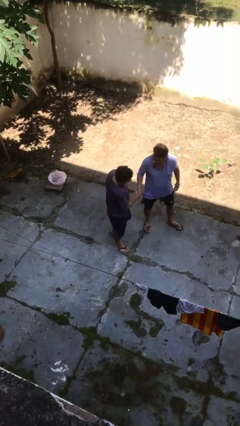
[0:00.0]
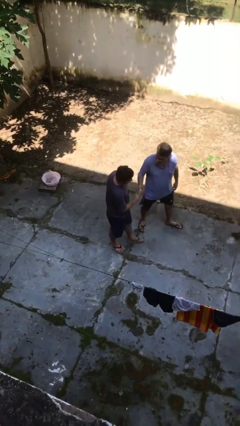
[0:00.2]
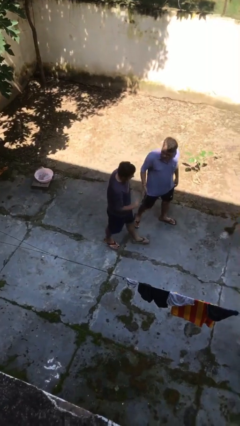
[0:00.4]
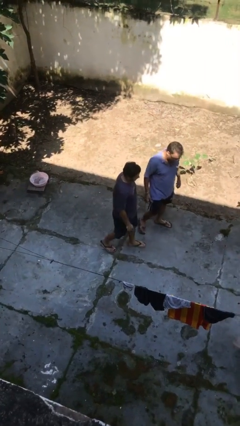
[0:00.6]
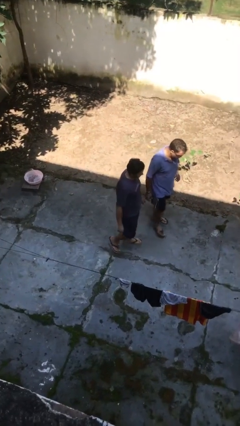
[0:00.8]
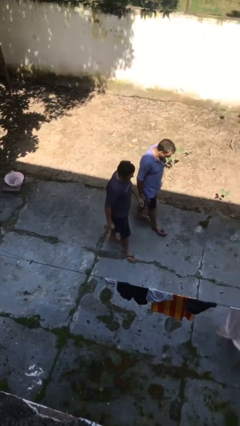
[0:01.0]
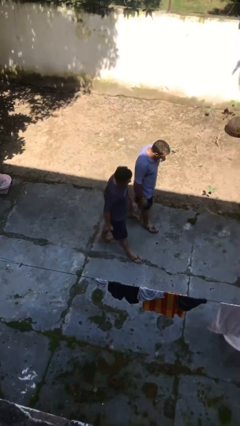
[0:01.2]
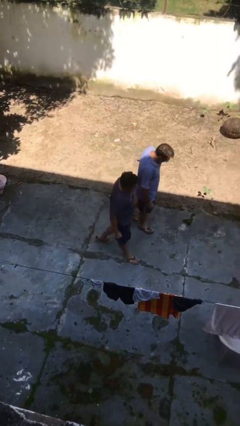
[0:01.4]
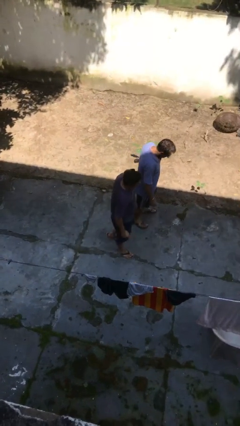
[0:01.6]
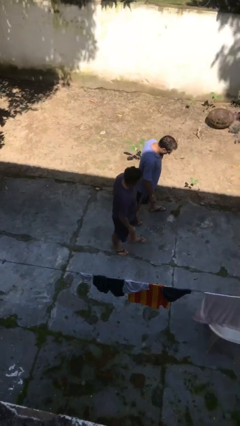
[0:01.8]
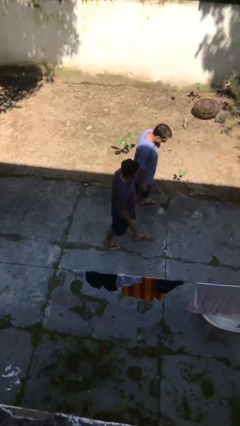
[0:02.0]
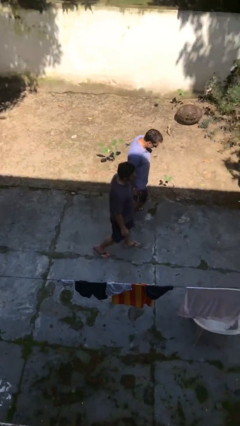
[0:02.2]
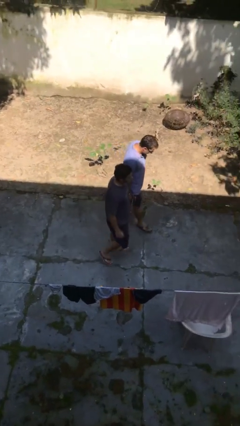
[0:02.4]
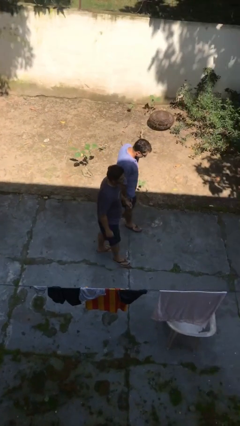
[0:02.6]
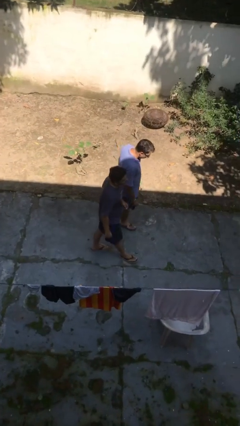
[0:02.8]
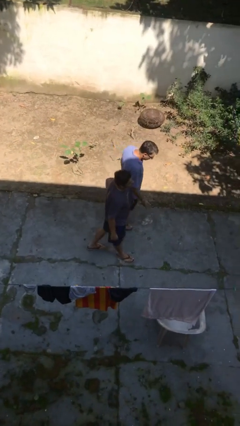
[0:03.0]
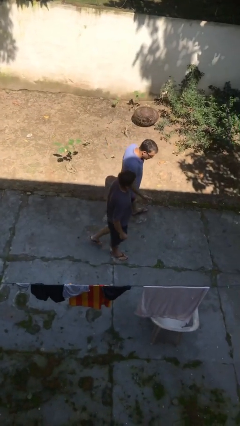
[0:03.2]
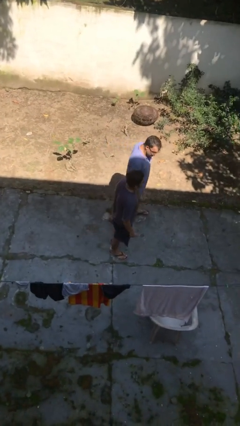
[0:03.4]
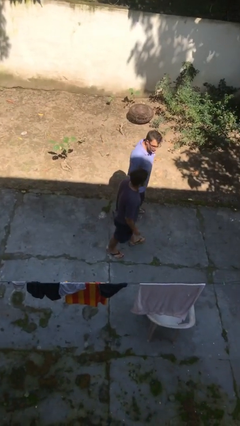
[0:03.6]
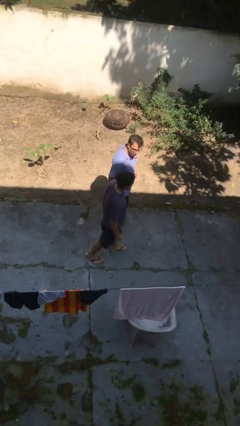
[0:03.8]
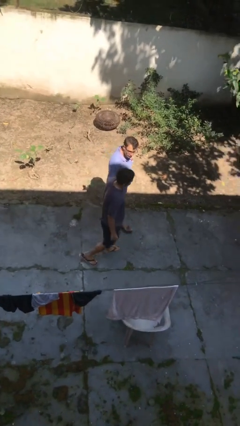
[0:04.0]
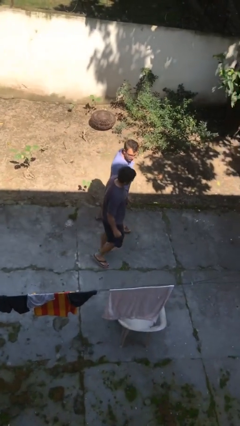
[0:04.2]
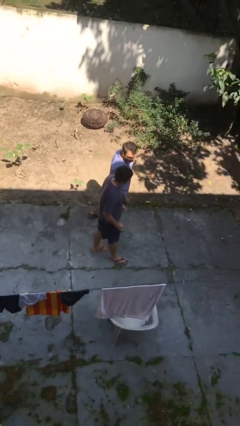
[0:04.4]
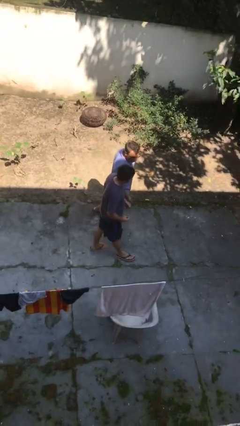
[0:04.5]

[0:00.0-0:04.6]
person talks to person

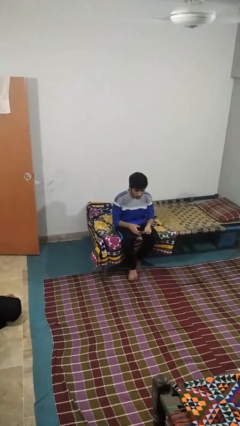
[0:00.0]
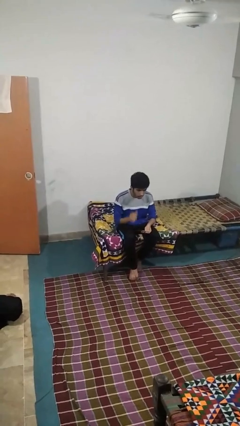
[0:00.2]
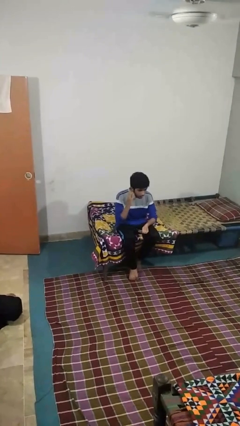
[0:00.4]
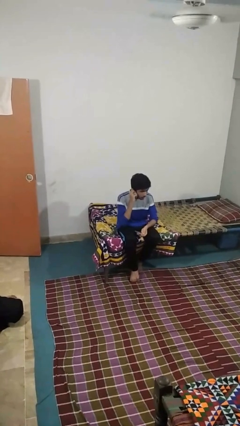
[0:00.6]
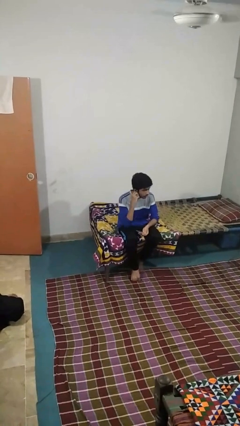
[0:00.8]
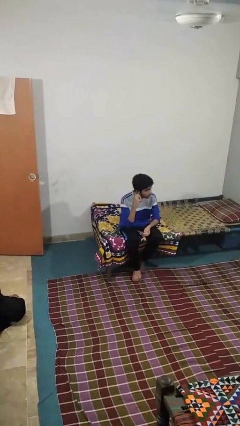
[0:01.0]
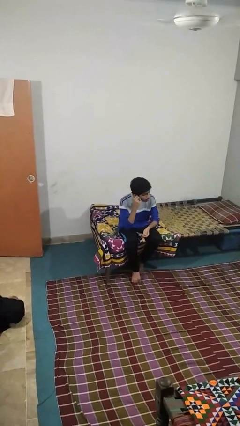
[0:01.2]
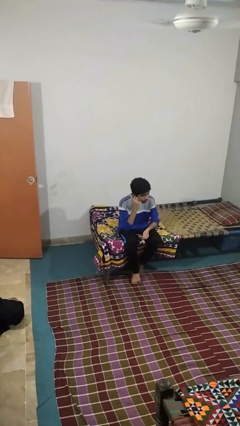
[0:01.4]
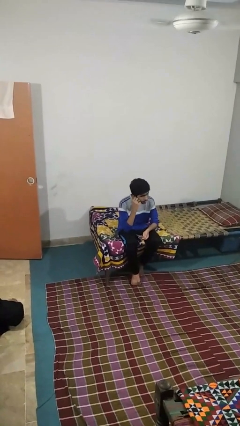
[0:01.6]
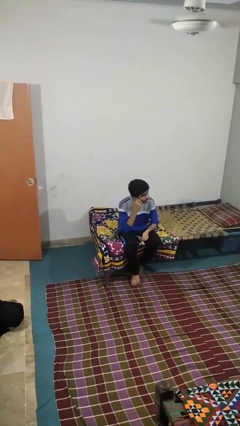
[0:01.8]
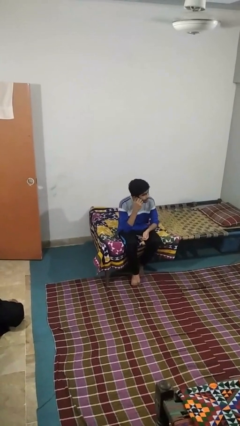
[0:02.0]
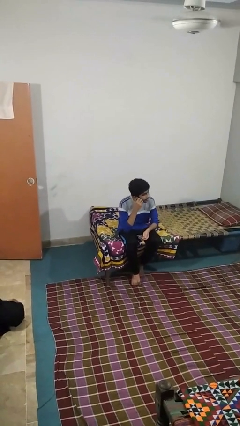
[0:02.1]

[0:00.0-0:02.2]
person touches earlobe

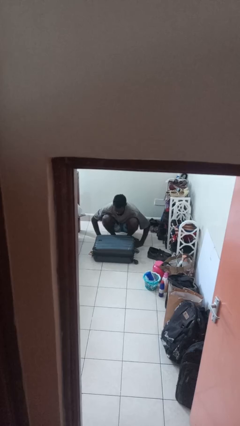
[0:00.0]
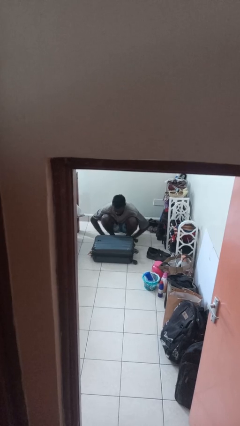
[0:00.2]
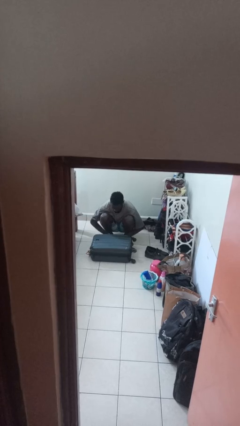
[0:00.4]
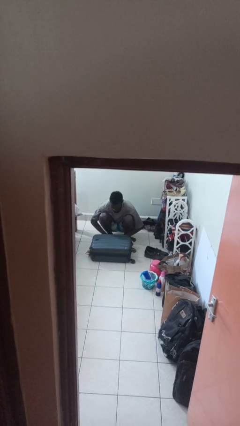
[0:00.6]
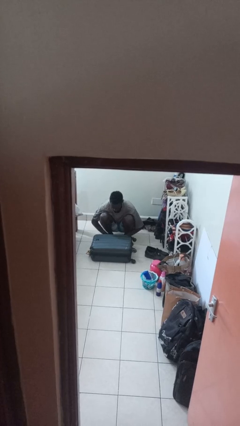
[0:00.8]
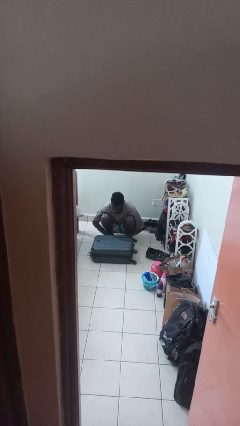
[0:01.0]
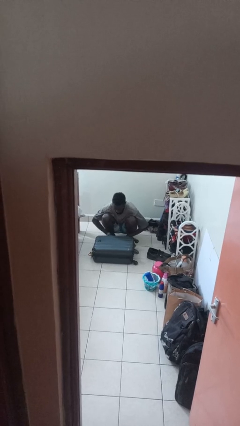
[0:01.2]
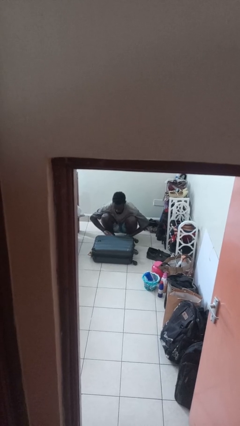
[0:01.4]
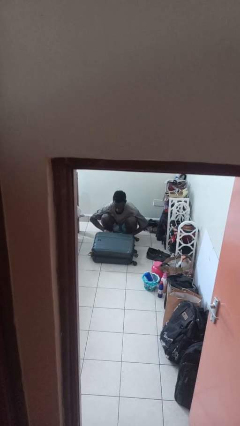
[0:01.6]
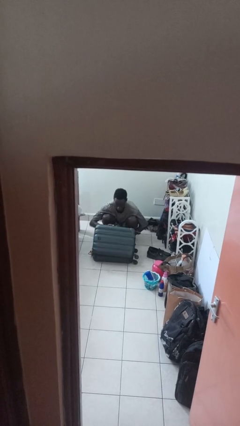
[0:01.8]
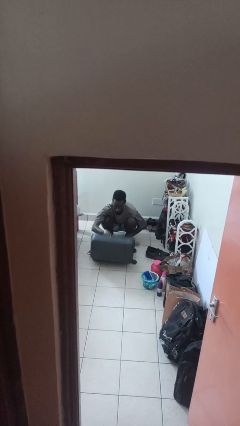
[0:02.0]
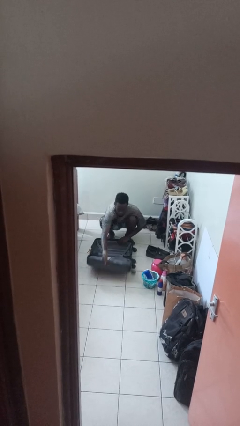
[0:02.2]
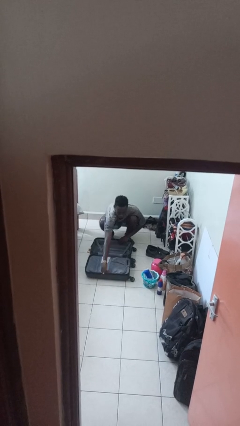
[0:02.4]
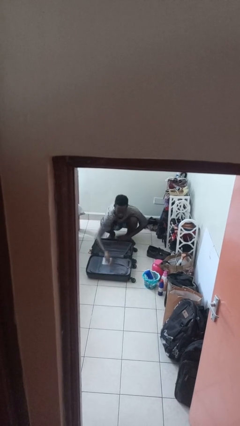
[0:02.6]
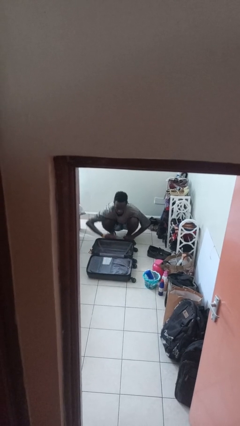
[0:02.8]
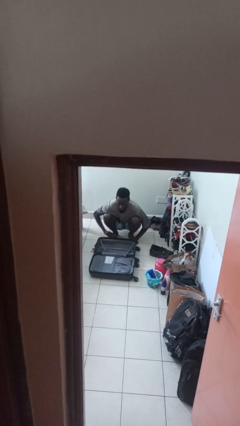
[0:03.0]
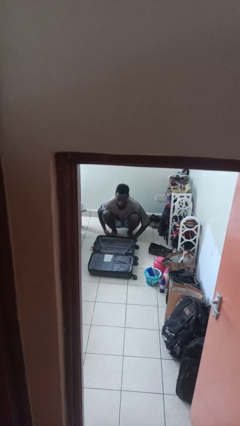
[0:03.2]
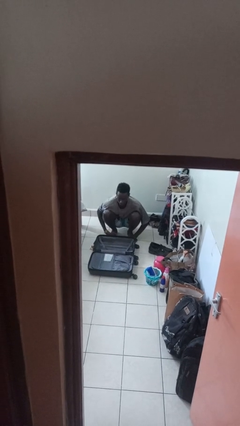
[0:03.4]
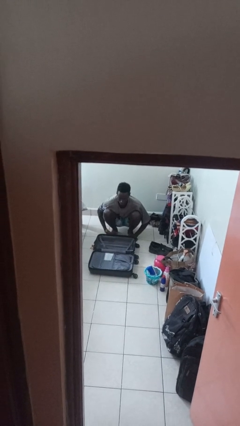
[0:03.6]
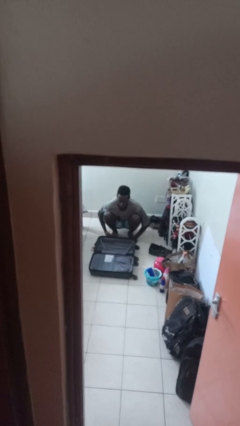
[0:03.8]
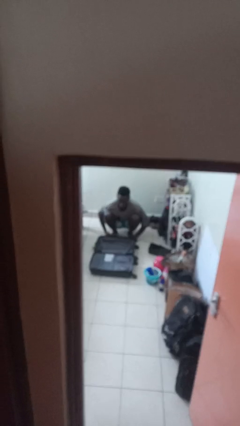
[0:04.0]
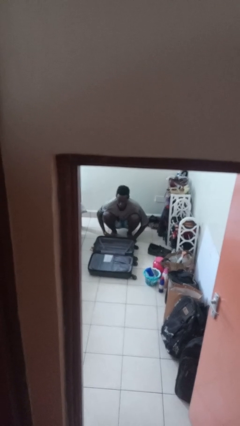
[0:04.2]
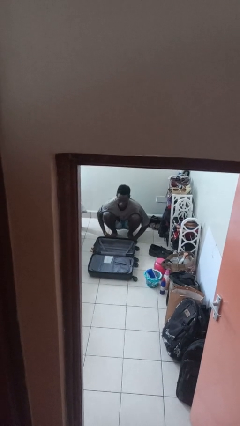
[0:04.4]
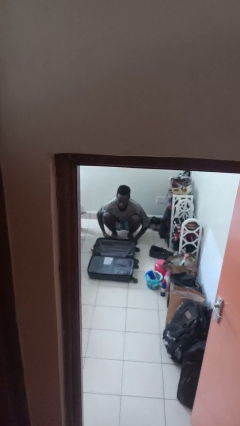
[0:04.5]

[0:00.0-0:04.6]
person opens suitcase

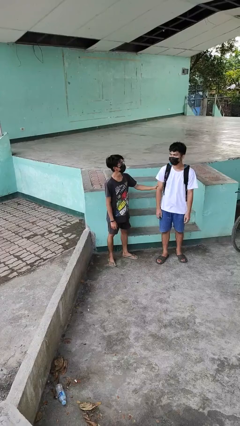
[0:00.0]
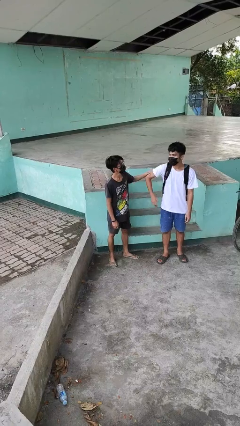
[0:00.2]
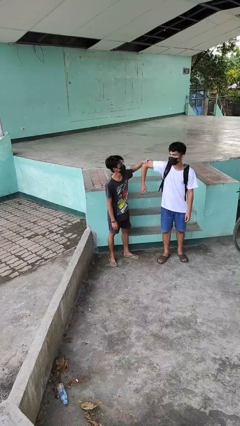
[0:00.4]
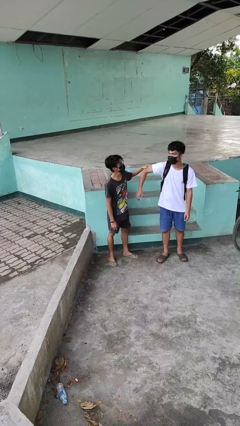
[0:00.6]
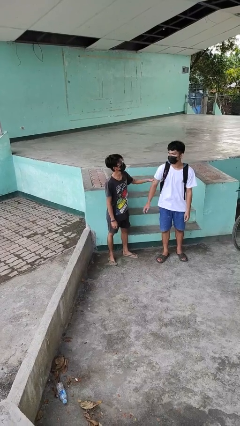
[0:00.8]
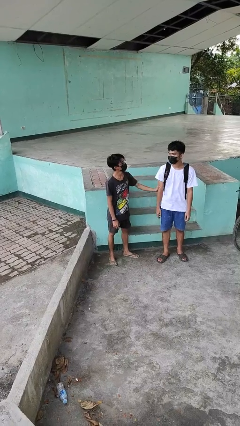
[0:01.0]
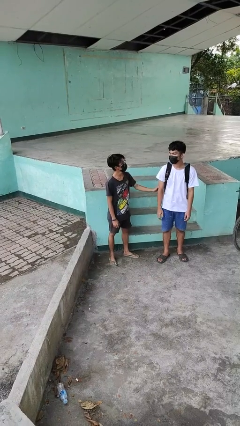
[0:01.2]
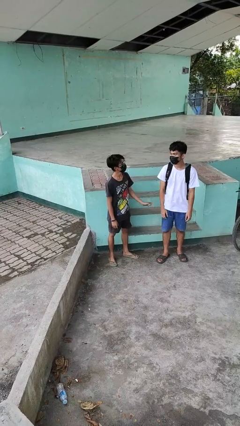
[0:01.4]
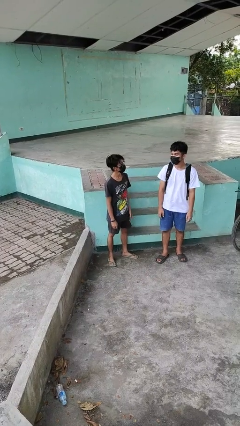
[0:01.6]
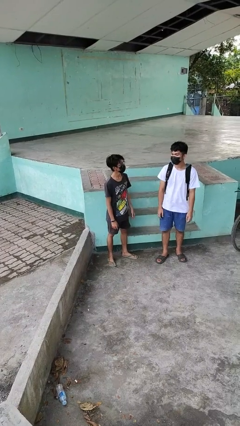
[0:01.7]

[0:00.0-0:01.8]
person grabs person by bicep

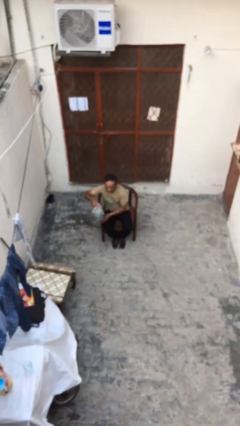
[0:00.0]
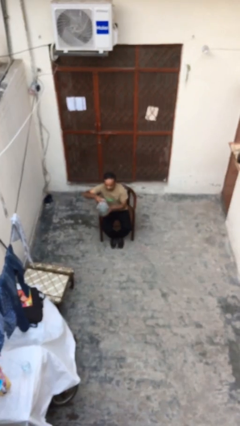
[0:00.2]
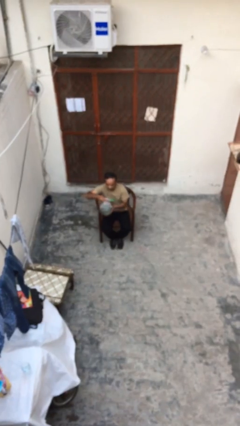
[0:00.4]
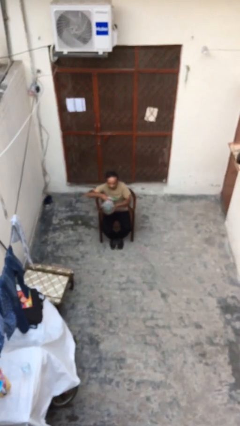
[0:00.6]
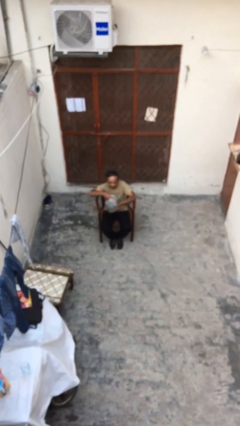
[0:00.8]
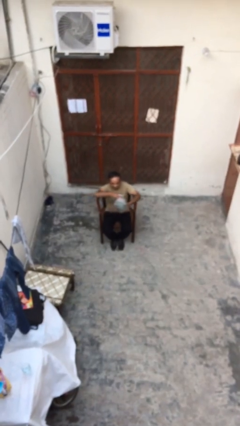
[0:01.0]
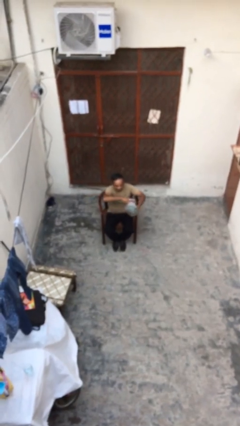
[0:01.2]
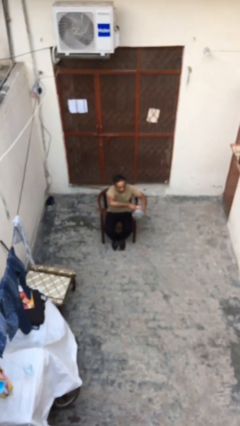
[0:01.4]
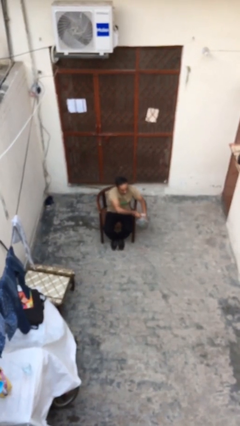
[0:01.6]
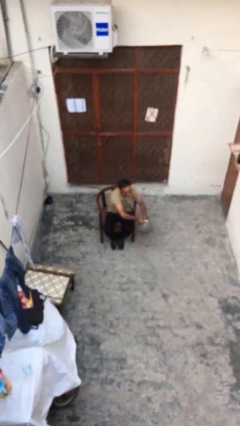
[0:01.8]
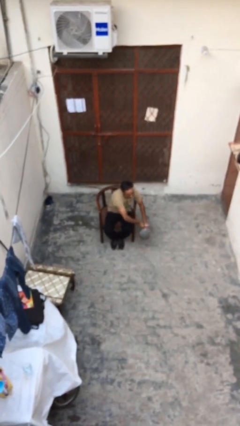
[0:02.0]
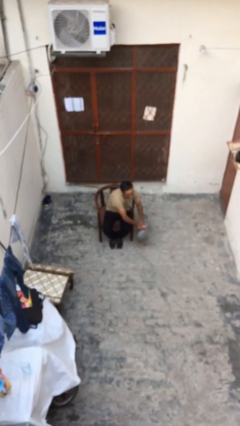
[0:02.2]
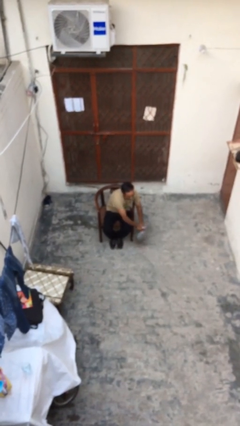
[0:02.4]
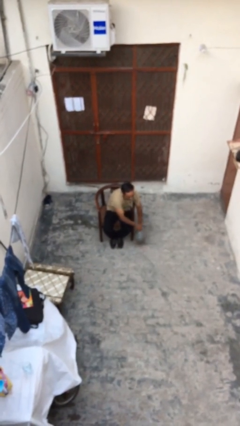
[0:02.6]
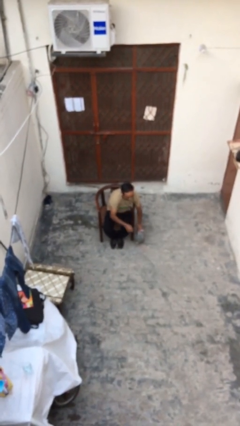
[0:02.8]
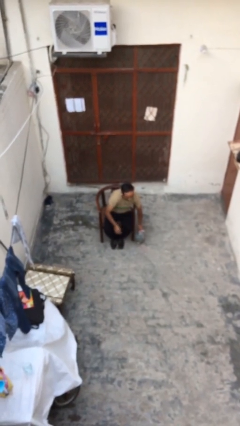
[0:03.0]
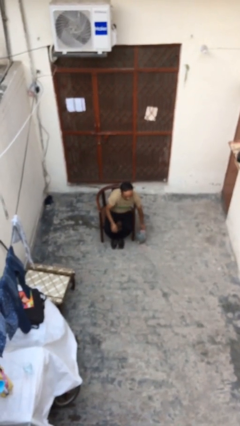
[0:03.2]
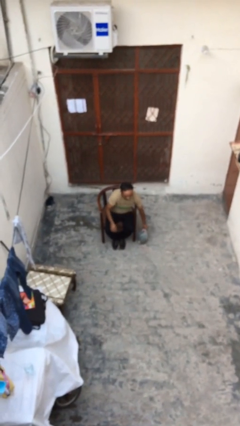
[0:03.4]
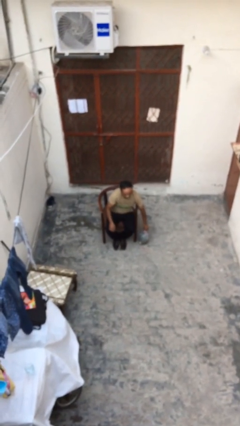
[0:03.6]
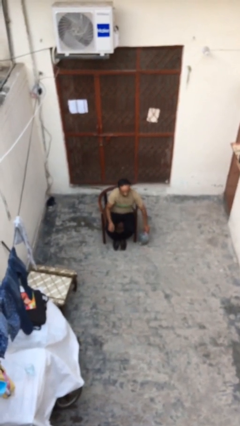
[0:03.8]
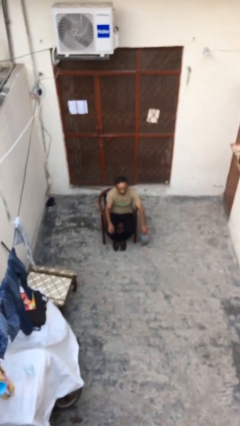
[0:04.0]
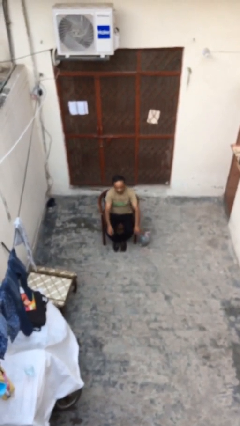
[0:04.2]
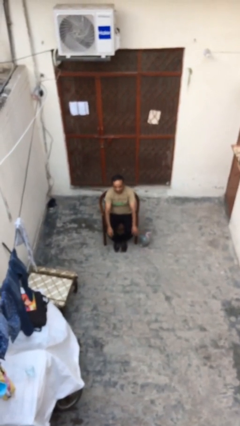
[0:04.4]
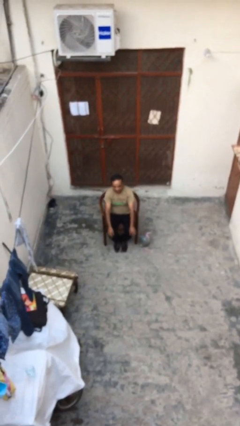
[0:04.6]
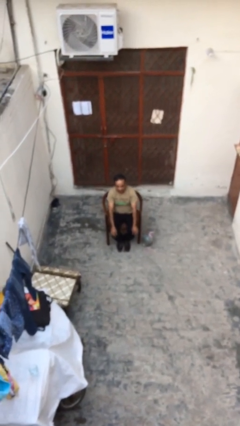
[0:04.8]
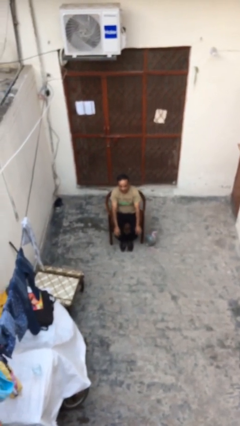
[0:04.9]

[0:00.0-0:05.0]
person puts down object on floor
